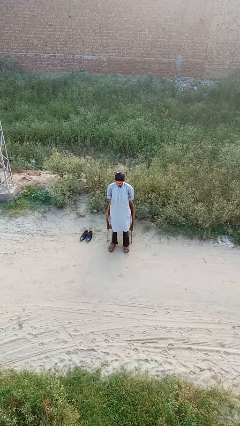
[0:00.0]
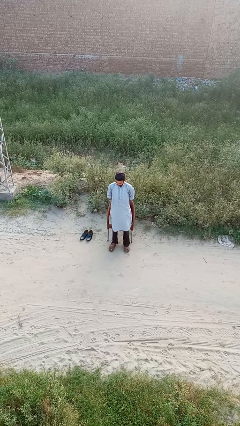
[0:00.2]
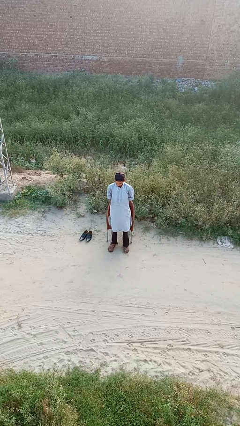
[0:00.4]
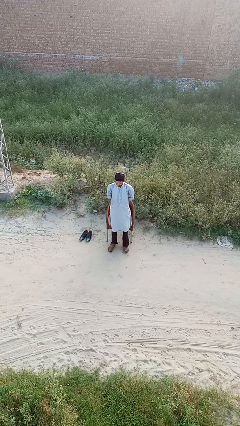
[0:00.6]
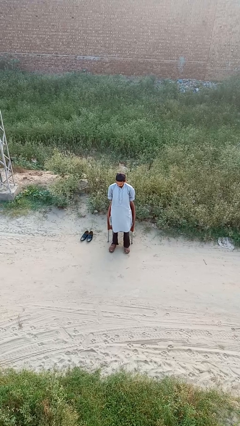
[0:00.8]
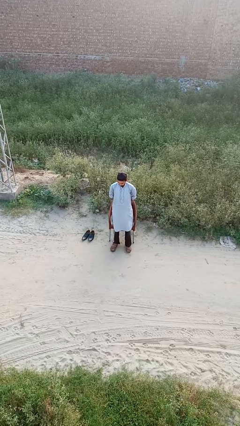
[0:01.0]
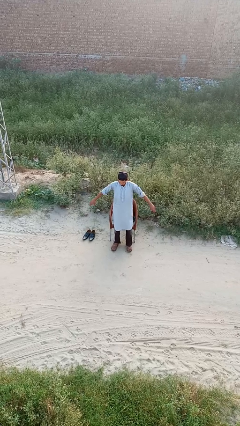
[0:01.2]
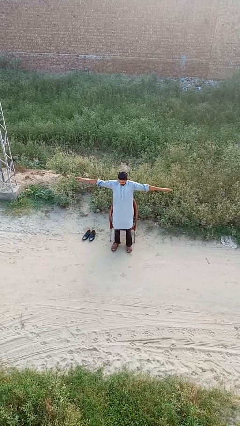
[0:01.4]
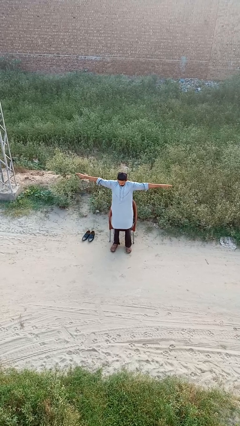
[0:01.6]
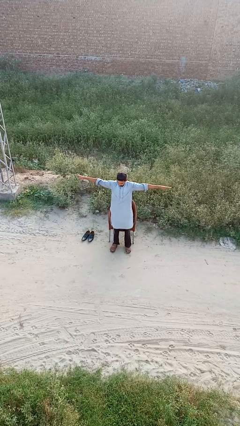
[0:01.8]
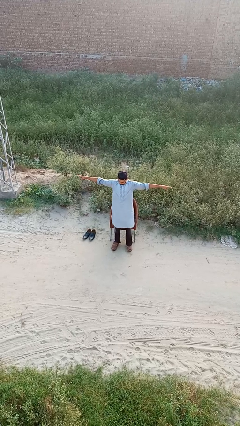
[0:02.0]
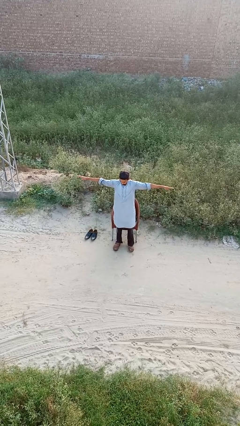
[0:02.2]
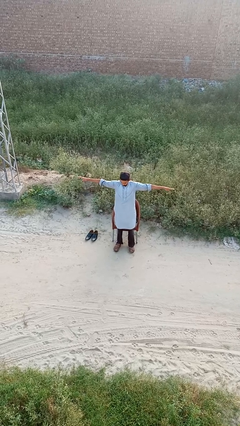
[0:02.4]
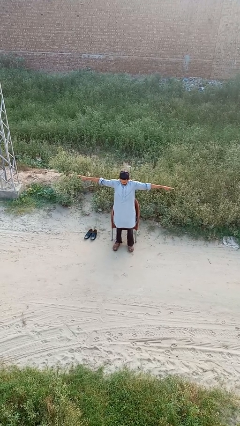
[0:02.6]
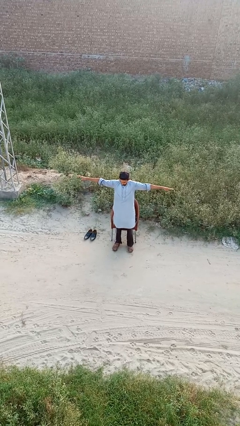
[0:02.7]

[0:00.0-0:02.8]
person stretches arms to side

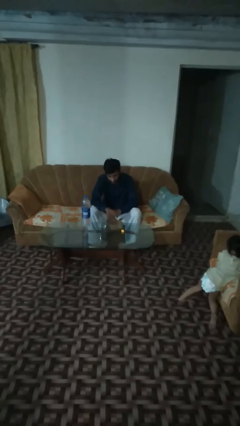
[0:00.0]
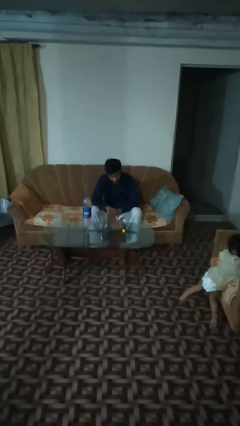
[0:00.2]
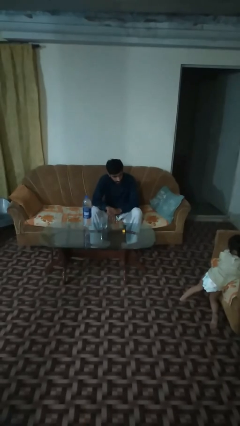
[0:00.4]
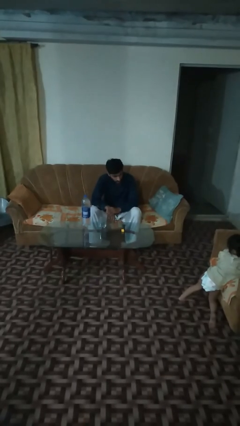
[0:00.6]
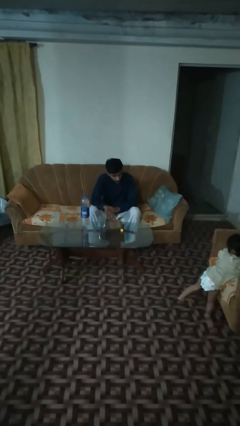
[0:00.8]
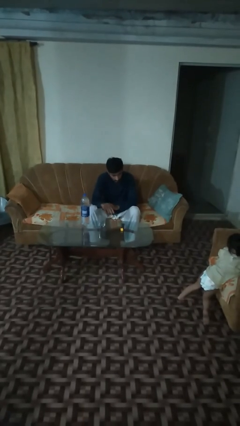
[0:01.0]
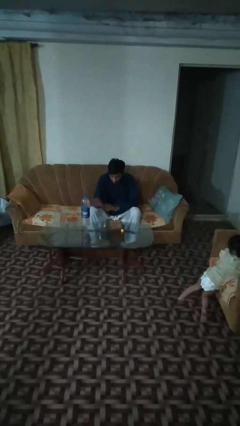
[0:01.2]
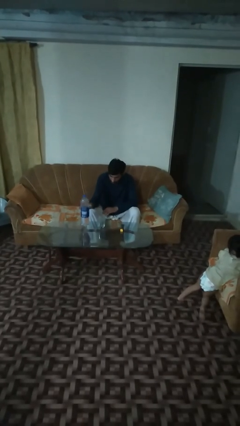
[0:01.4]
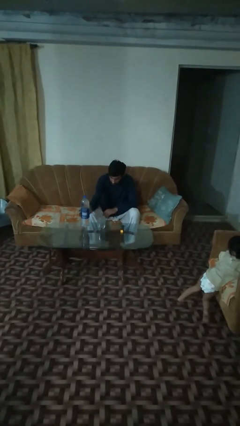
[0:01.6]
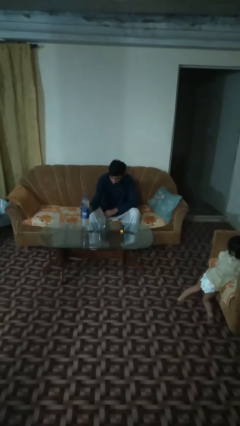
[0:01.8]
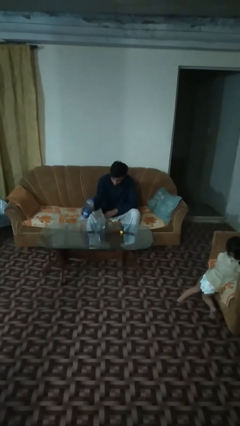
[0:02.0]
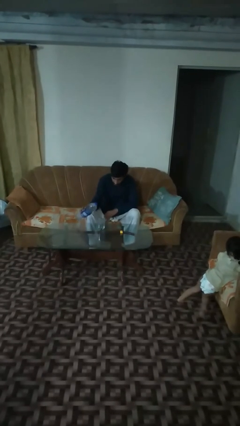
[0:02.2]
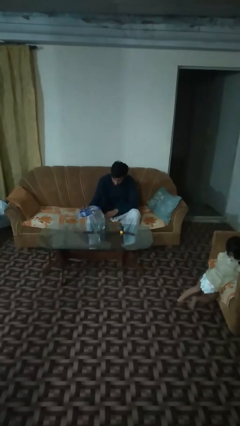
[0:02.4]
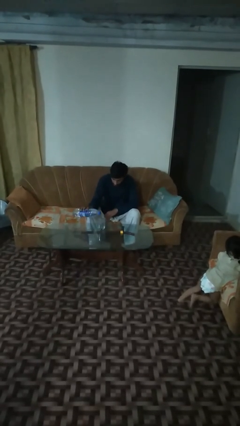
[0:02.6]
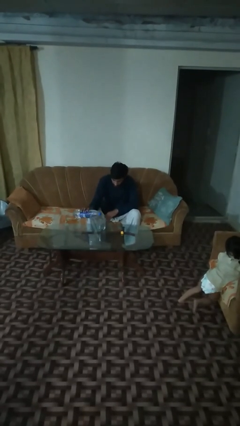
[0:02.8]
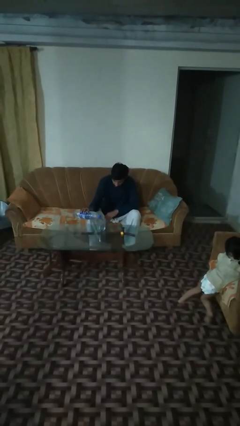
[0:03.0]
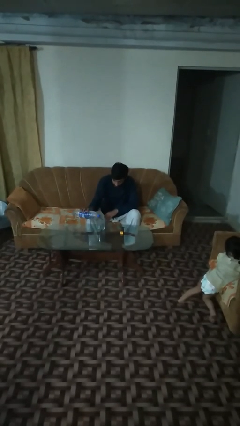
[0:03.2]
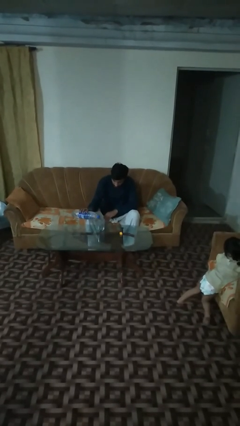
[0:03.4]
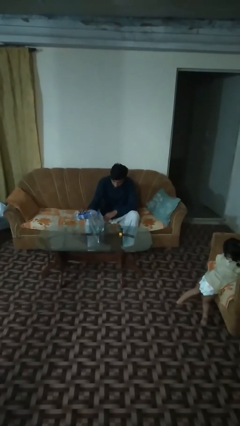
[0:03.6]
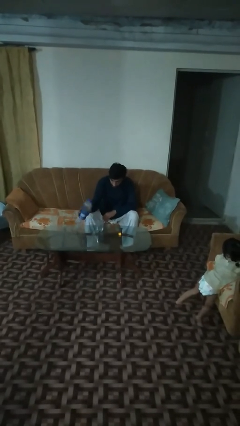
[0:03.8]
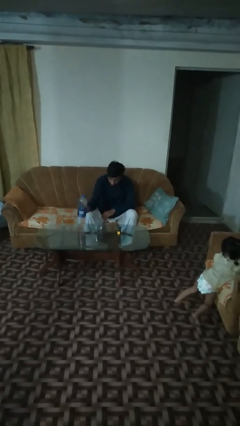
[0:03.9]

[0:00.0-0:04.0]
person pours liquid into cup

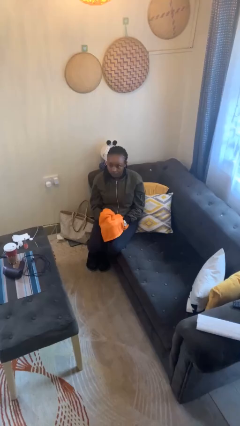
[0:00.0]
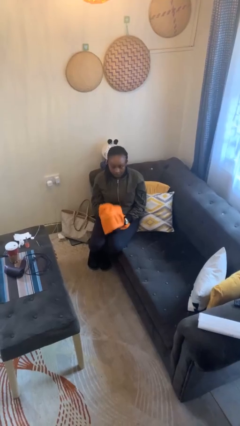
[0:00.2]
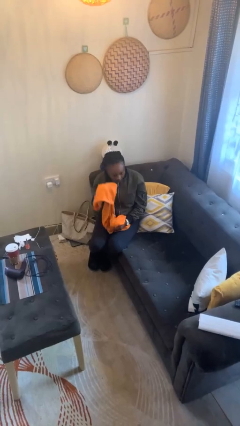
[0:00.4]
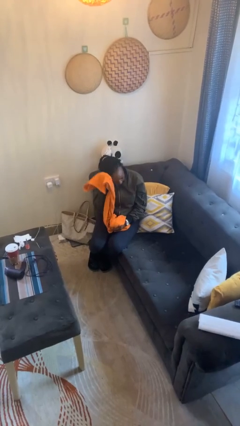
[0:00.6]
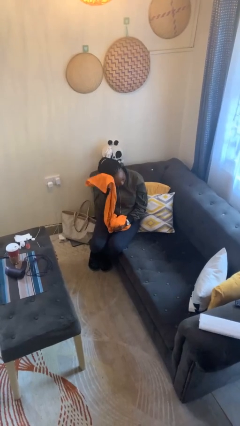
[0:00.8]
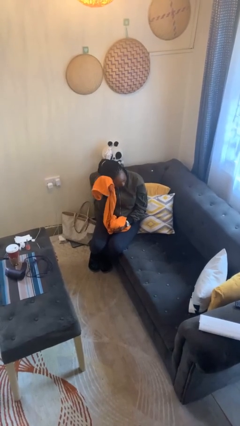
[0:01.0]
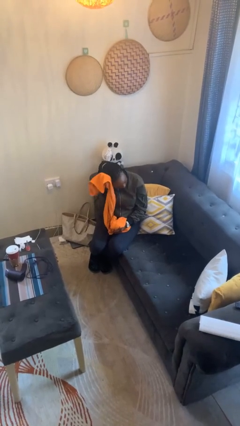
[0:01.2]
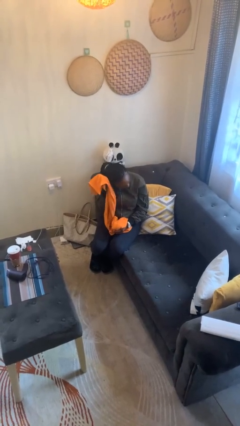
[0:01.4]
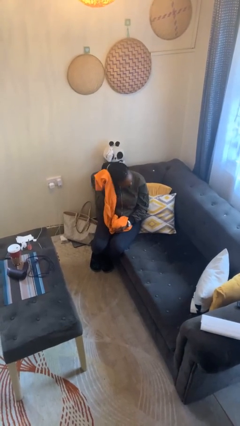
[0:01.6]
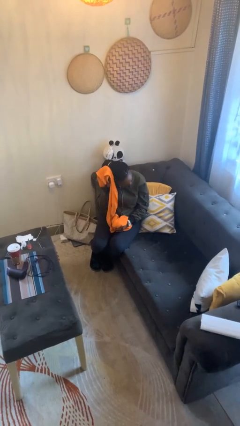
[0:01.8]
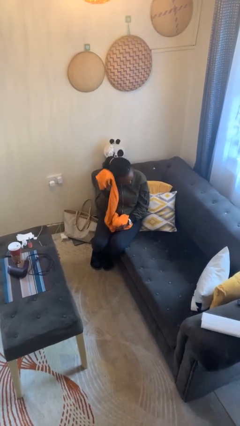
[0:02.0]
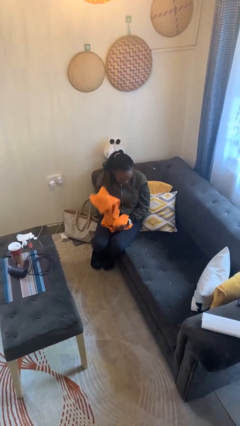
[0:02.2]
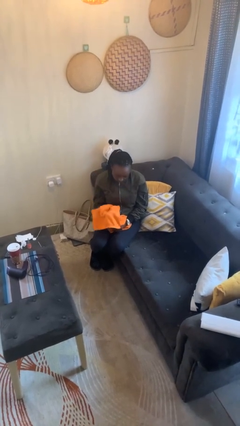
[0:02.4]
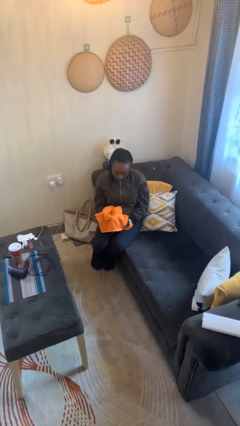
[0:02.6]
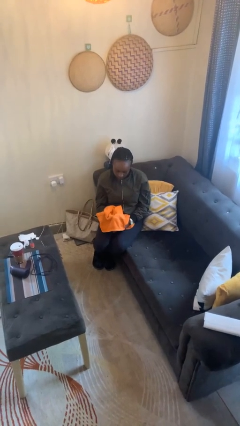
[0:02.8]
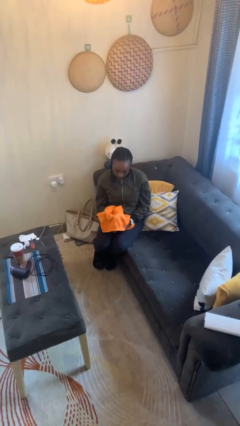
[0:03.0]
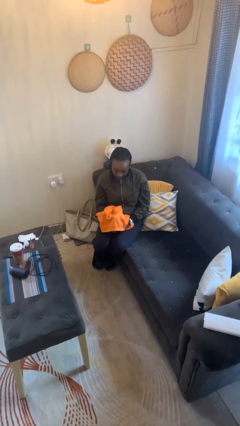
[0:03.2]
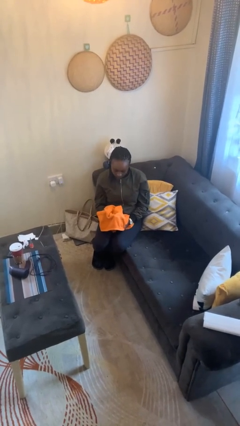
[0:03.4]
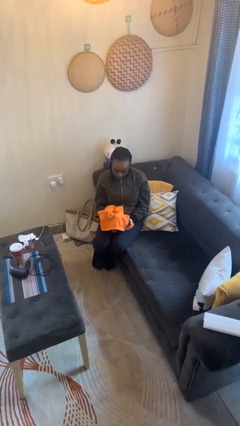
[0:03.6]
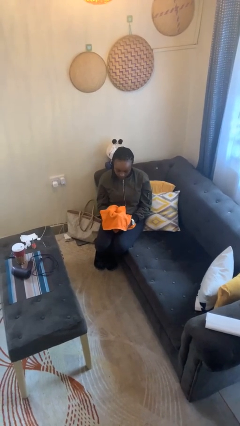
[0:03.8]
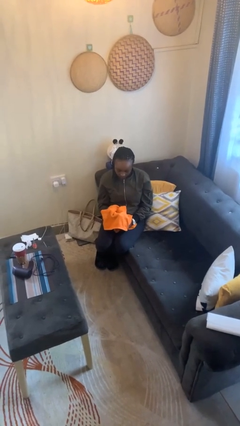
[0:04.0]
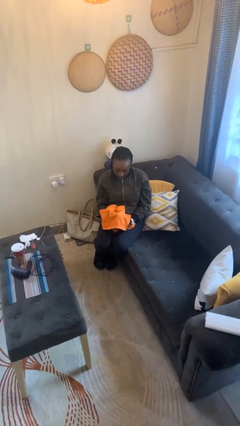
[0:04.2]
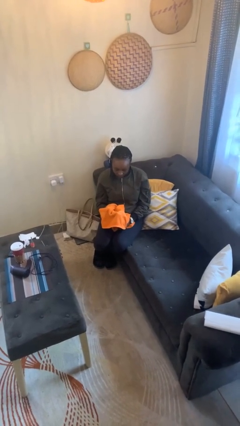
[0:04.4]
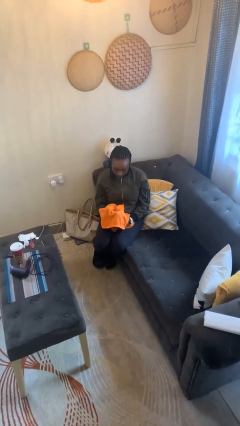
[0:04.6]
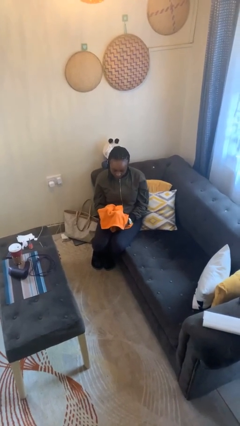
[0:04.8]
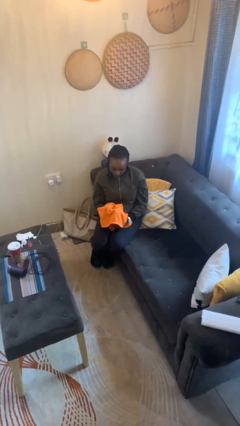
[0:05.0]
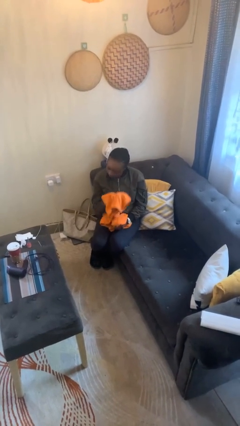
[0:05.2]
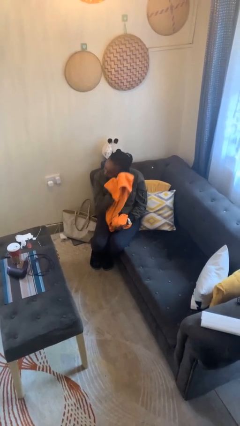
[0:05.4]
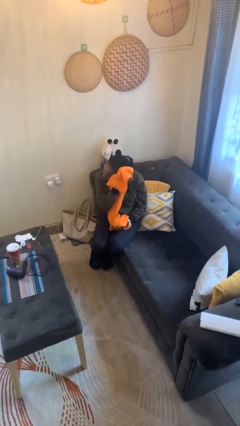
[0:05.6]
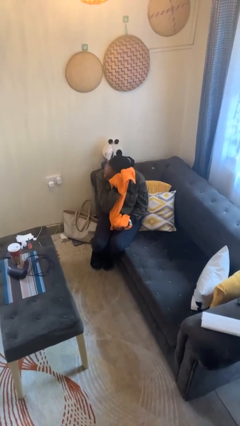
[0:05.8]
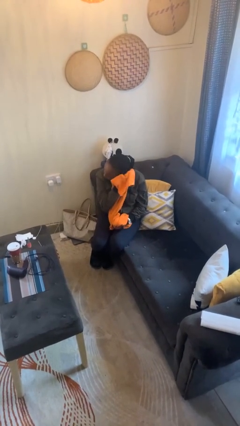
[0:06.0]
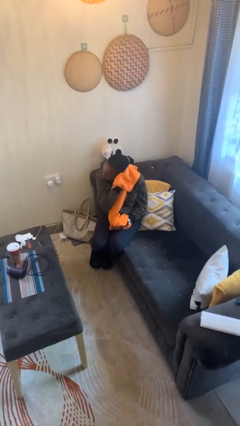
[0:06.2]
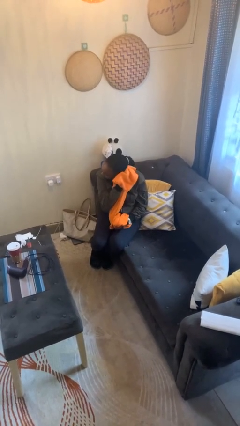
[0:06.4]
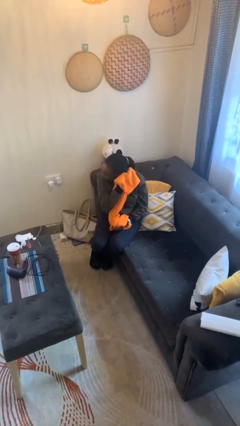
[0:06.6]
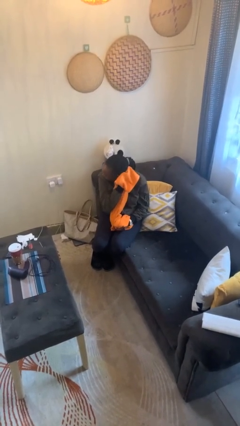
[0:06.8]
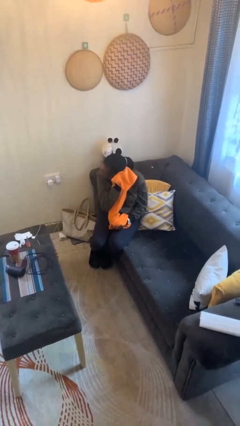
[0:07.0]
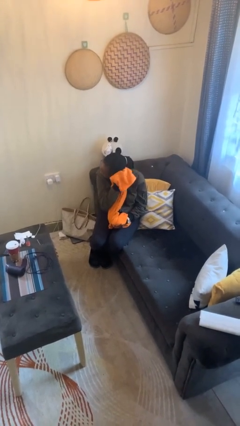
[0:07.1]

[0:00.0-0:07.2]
person dries hair with towel

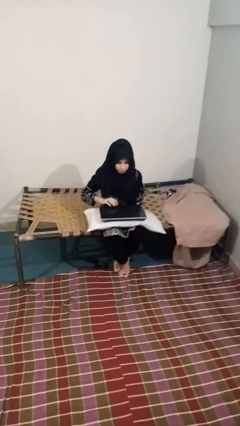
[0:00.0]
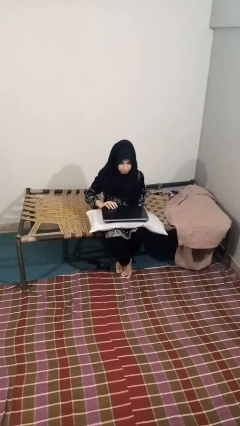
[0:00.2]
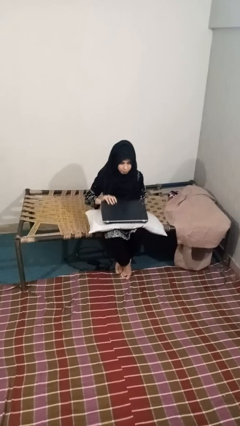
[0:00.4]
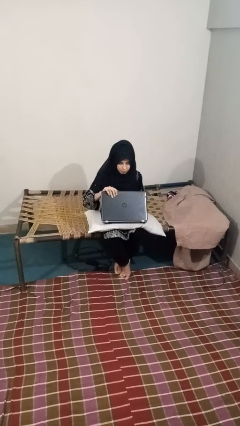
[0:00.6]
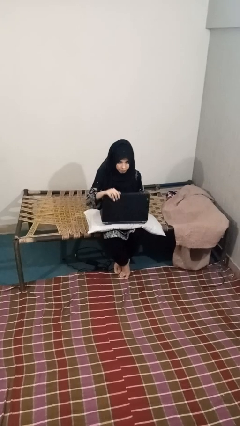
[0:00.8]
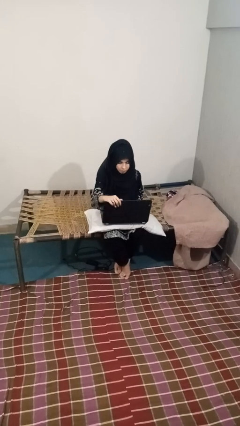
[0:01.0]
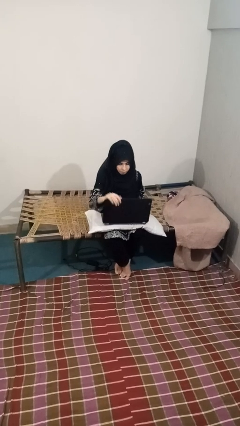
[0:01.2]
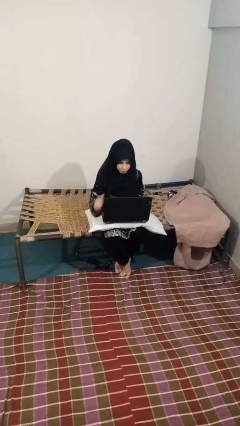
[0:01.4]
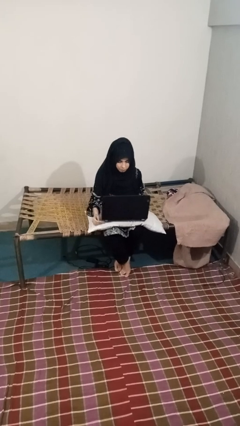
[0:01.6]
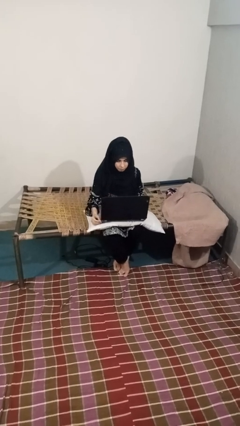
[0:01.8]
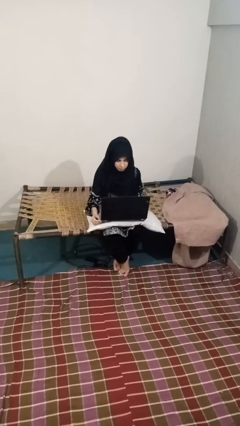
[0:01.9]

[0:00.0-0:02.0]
person opens laptop

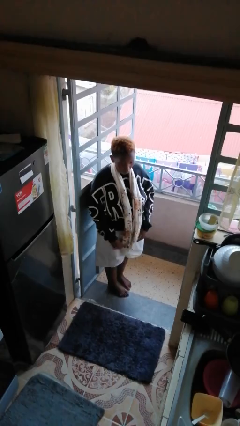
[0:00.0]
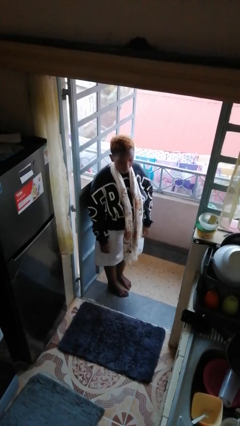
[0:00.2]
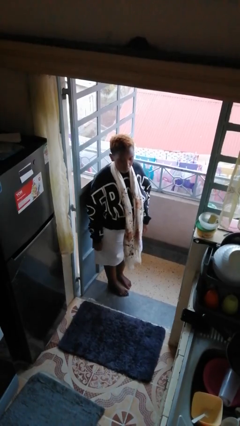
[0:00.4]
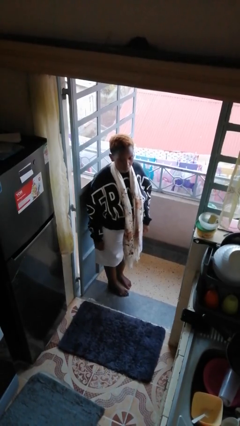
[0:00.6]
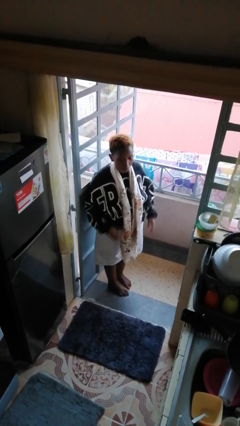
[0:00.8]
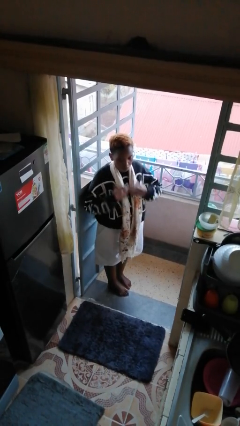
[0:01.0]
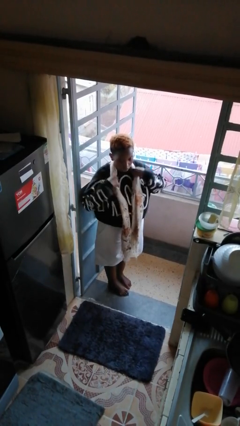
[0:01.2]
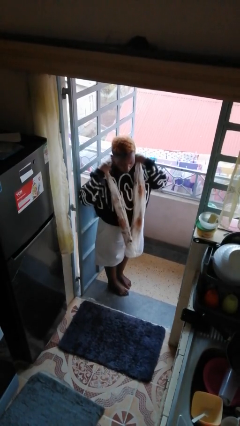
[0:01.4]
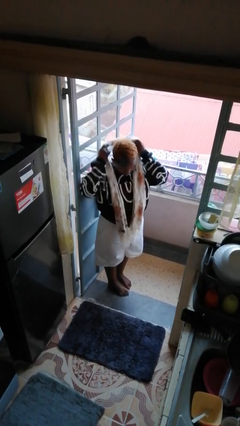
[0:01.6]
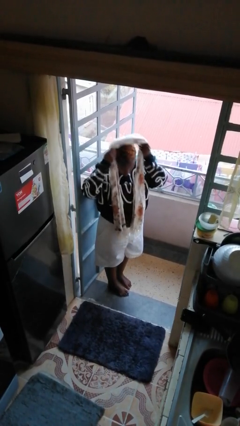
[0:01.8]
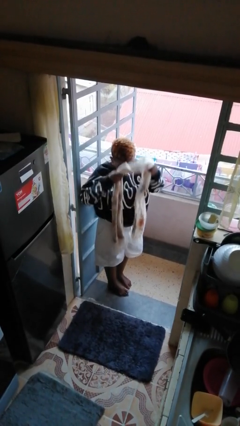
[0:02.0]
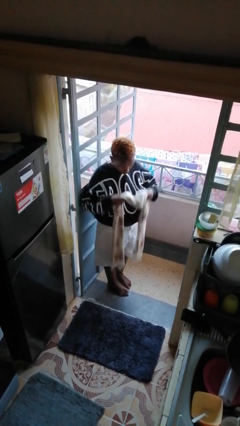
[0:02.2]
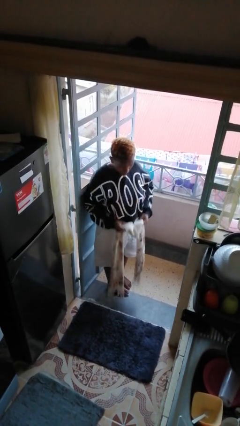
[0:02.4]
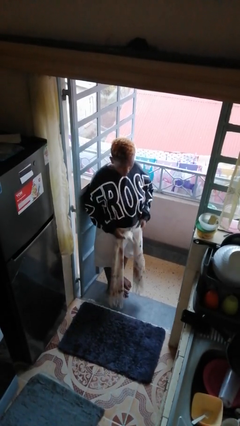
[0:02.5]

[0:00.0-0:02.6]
person takes off scarf
